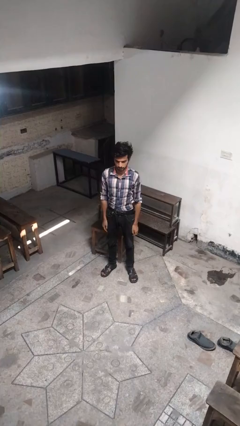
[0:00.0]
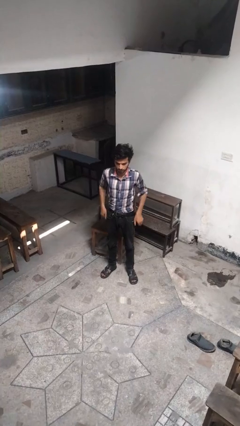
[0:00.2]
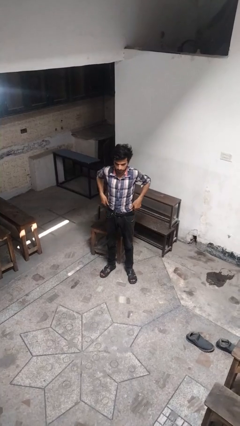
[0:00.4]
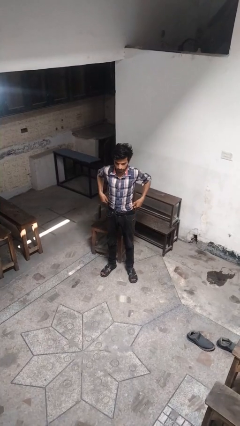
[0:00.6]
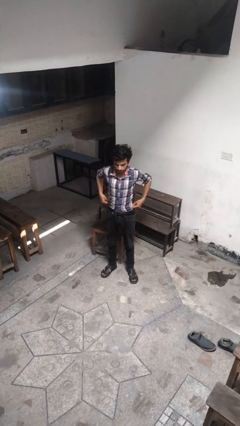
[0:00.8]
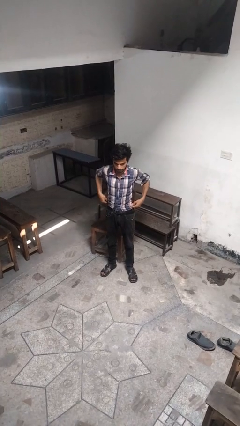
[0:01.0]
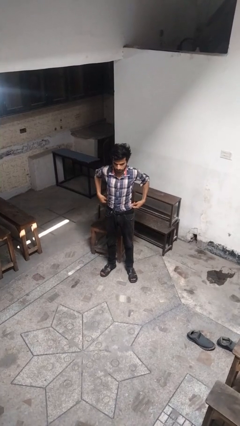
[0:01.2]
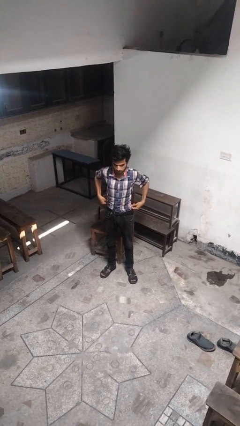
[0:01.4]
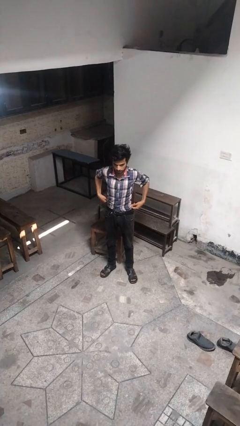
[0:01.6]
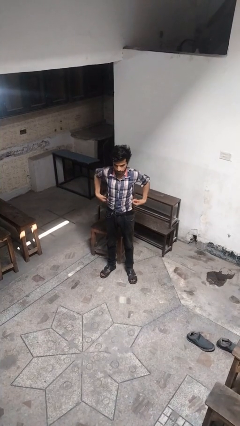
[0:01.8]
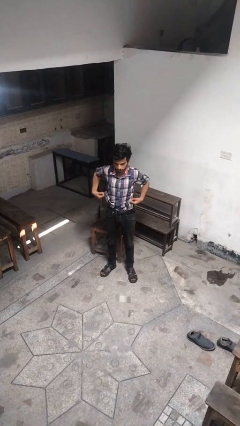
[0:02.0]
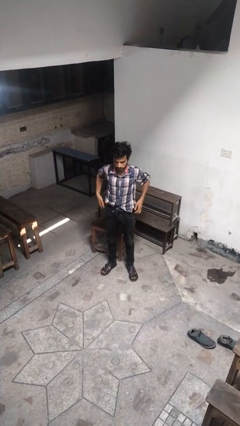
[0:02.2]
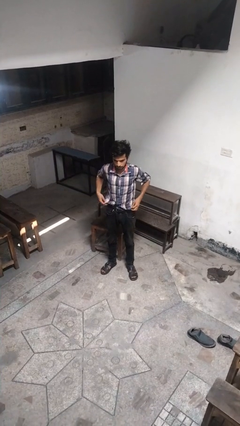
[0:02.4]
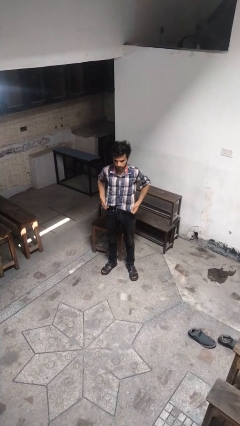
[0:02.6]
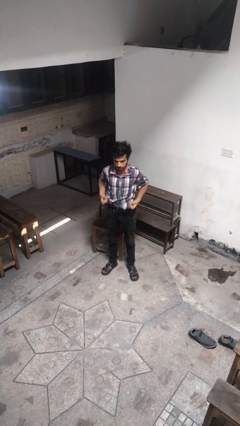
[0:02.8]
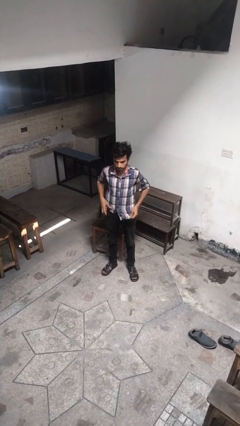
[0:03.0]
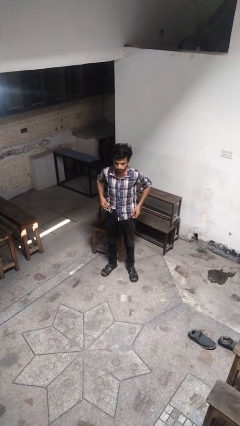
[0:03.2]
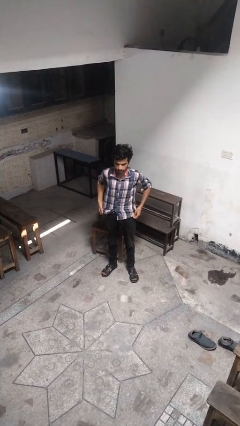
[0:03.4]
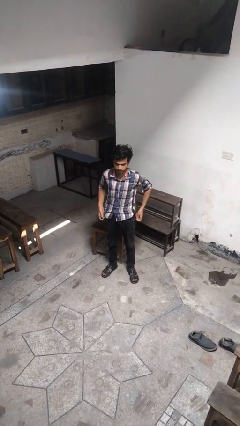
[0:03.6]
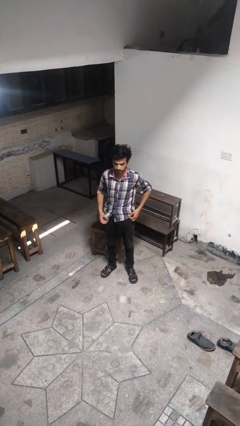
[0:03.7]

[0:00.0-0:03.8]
person untucks shirt

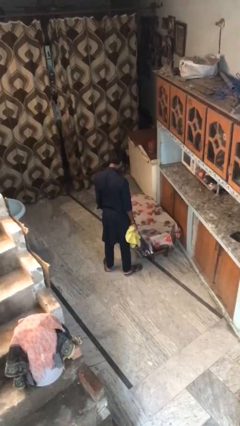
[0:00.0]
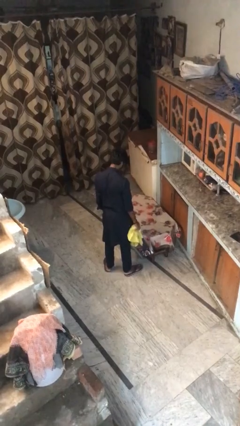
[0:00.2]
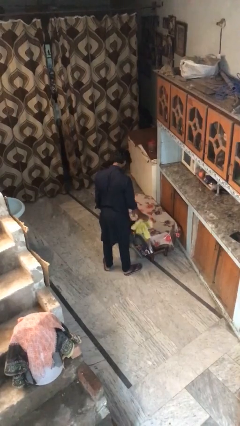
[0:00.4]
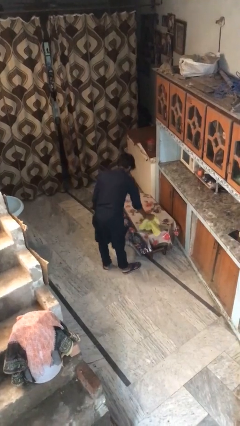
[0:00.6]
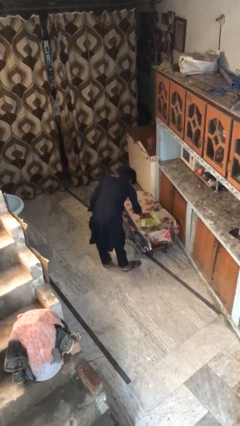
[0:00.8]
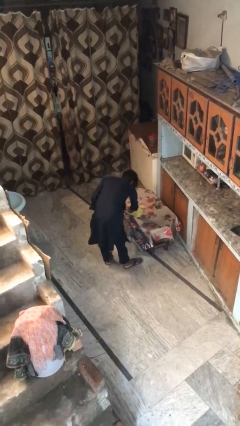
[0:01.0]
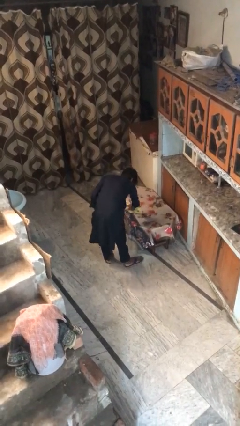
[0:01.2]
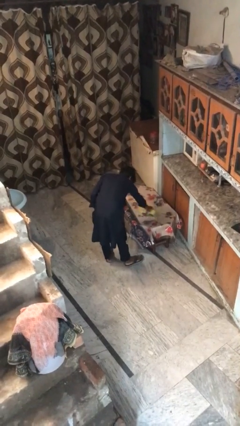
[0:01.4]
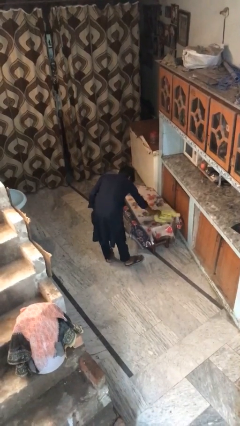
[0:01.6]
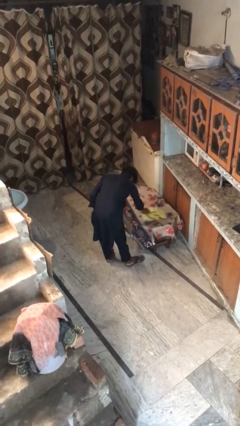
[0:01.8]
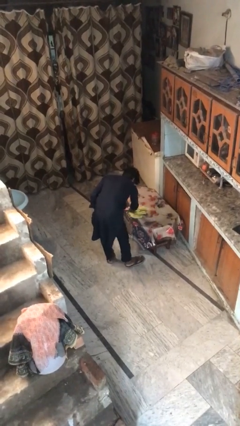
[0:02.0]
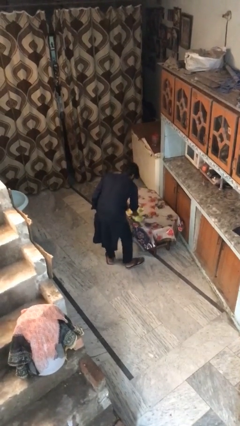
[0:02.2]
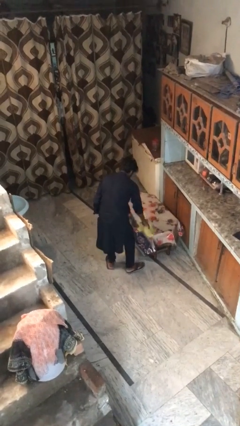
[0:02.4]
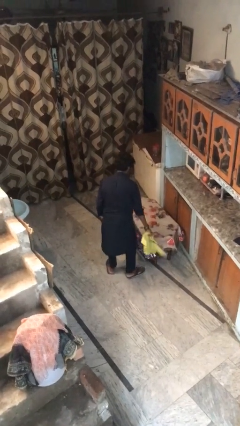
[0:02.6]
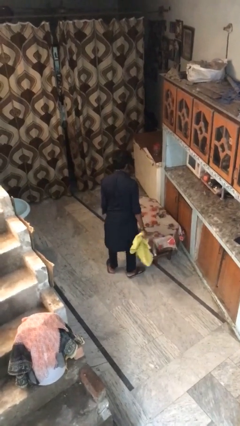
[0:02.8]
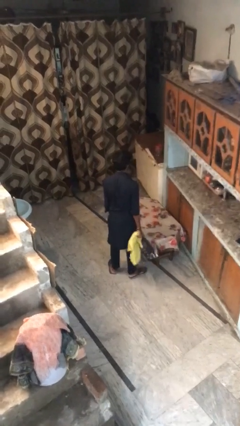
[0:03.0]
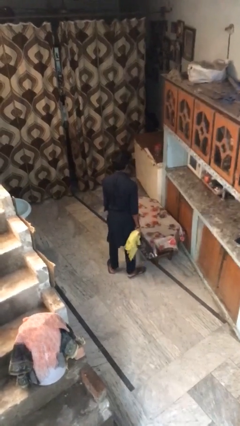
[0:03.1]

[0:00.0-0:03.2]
person cleans table with rag

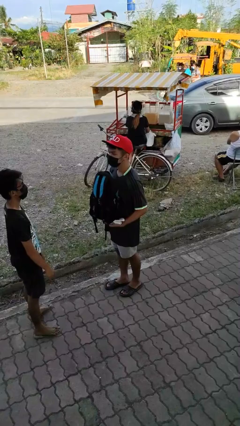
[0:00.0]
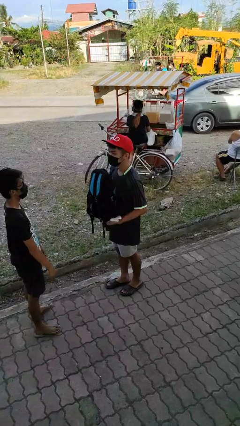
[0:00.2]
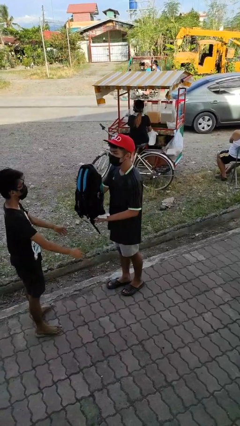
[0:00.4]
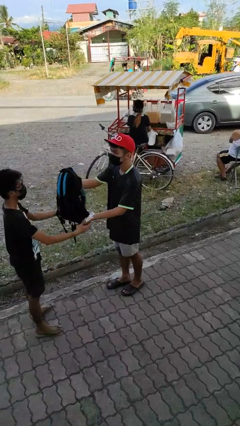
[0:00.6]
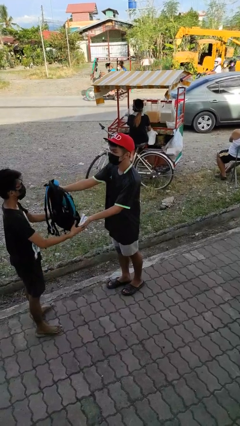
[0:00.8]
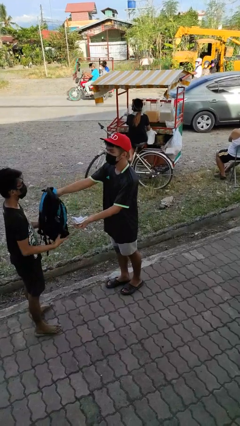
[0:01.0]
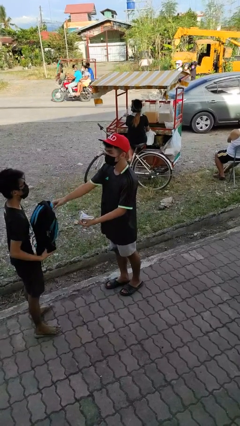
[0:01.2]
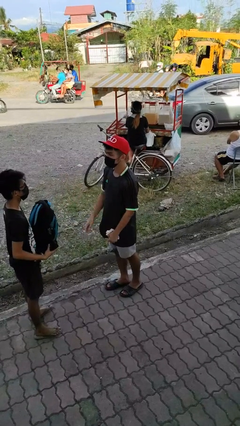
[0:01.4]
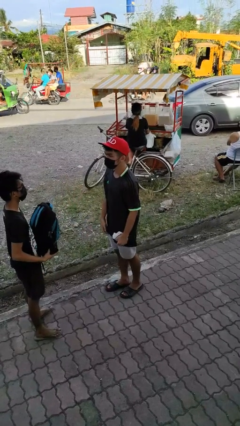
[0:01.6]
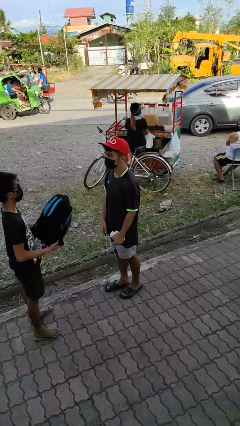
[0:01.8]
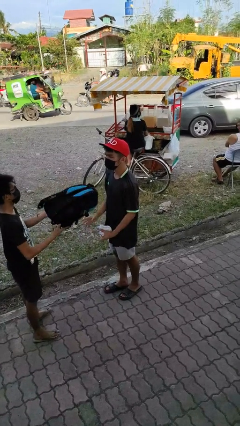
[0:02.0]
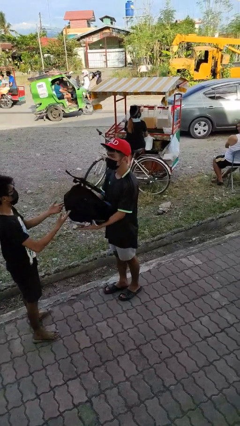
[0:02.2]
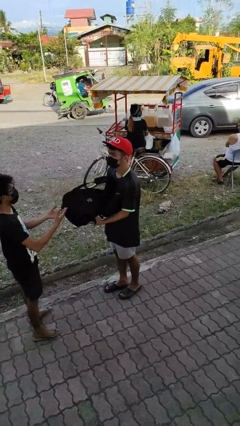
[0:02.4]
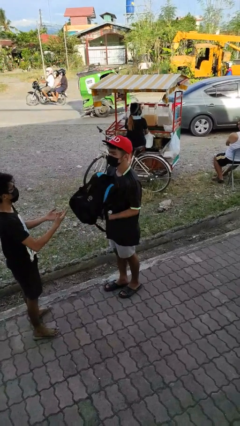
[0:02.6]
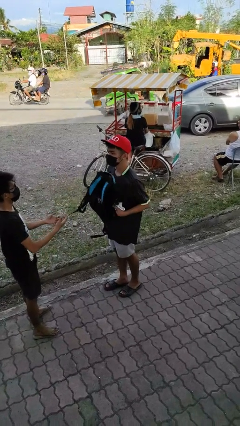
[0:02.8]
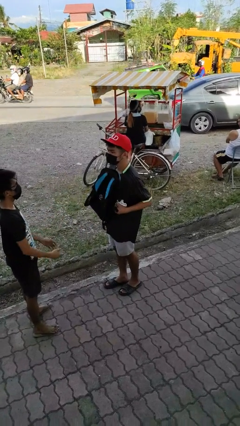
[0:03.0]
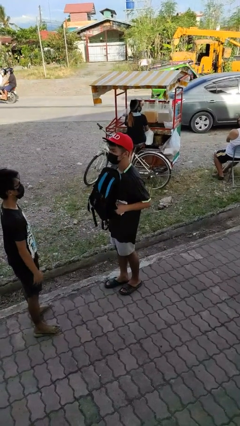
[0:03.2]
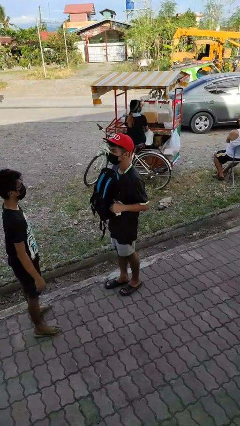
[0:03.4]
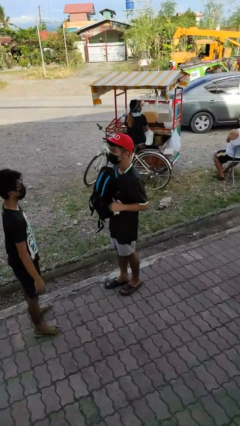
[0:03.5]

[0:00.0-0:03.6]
person transfers object to person

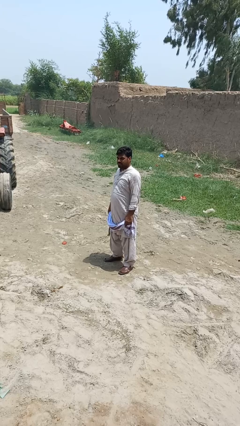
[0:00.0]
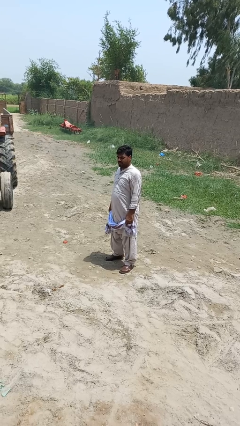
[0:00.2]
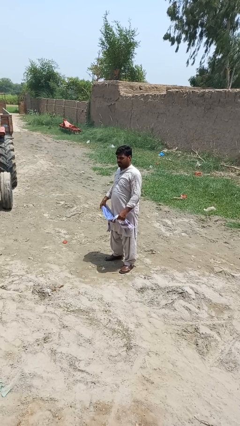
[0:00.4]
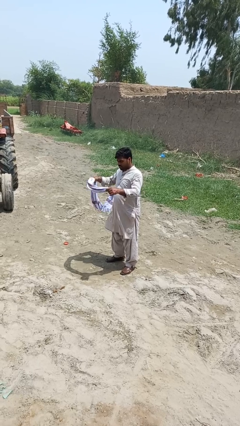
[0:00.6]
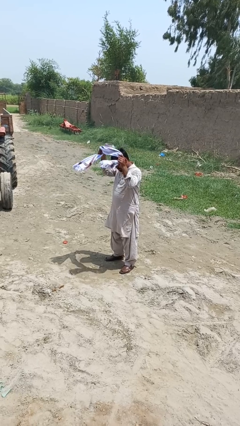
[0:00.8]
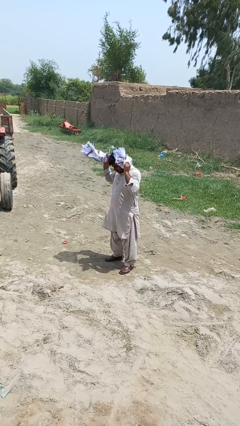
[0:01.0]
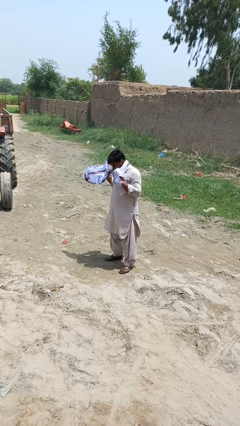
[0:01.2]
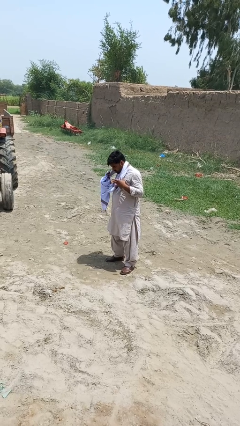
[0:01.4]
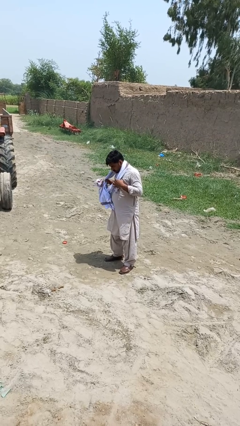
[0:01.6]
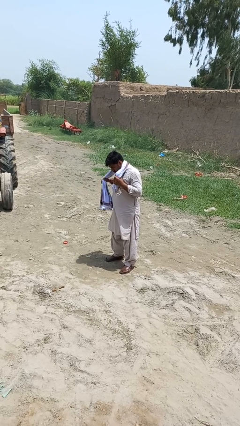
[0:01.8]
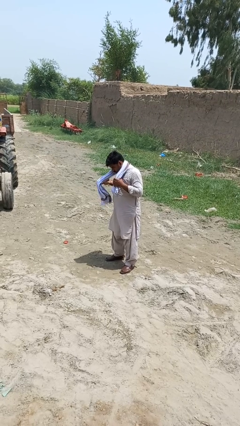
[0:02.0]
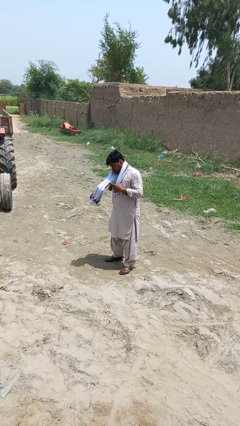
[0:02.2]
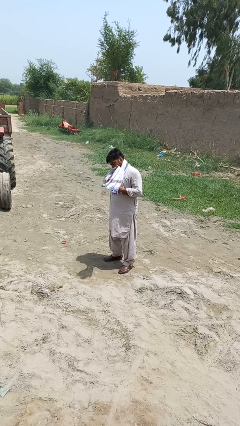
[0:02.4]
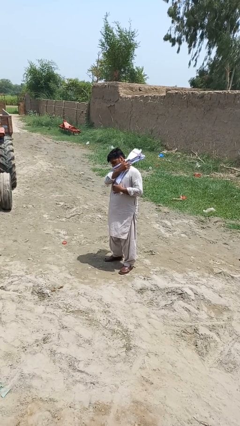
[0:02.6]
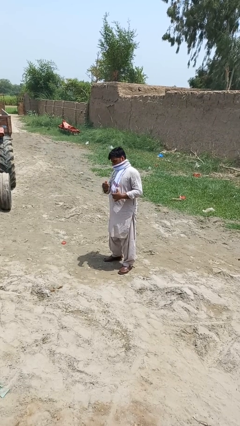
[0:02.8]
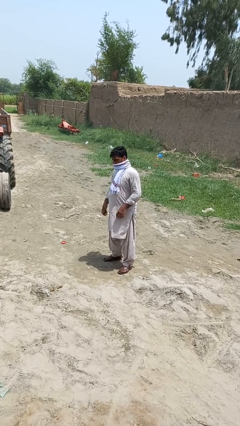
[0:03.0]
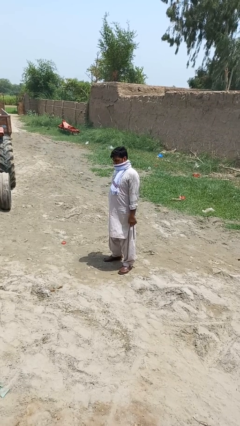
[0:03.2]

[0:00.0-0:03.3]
person puts on scarf

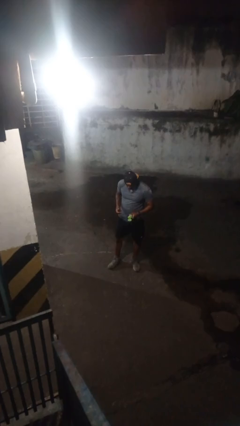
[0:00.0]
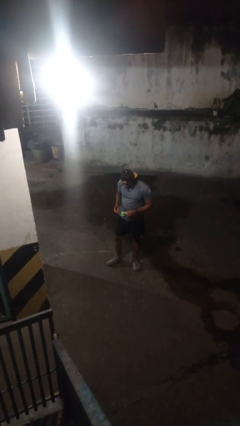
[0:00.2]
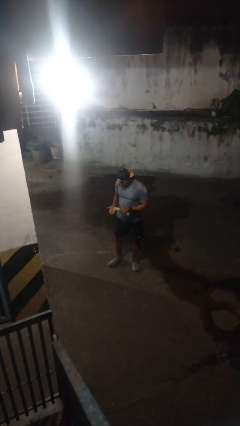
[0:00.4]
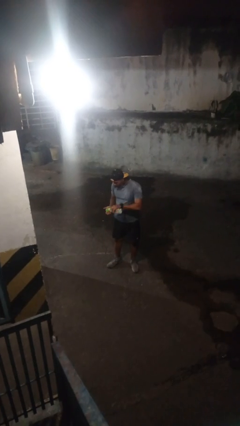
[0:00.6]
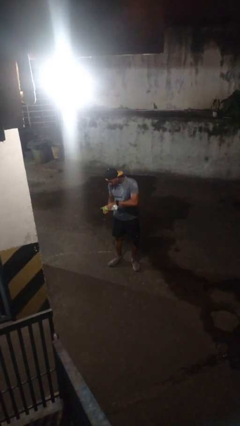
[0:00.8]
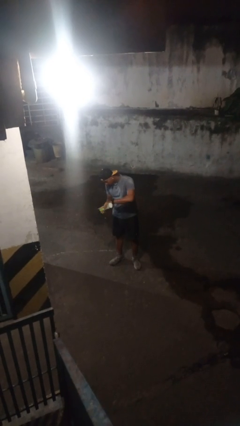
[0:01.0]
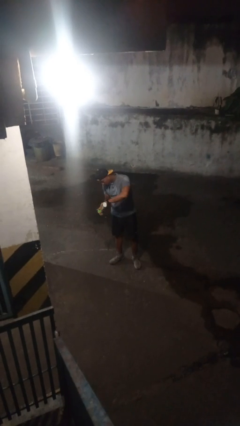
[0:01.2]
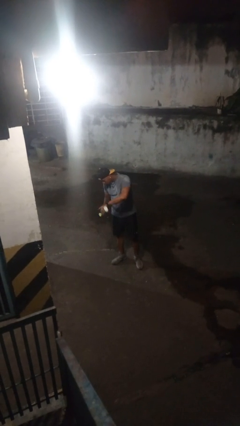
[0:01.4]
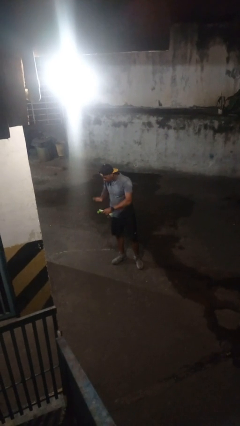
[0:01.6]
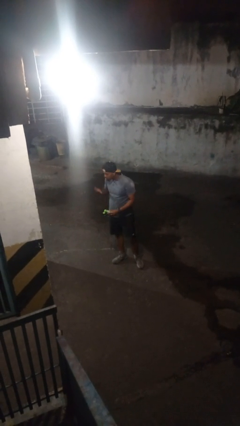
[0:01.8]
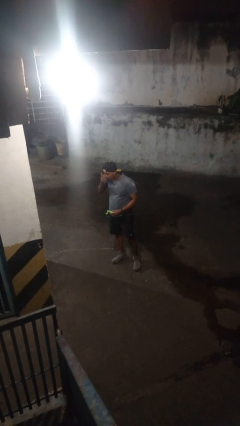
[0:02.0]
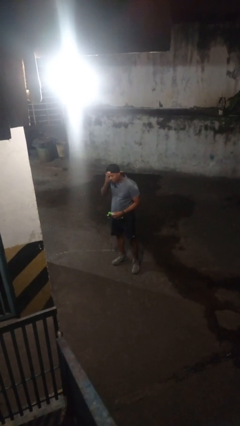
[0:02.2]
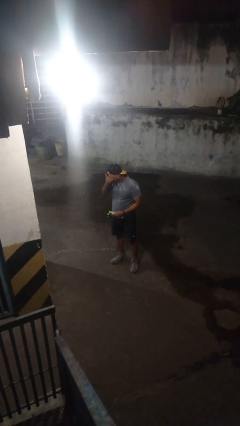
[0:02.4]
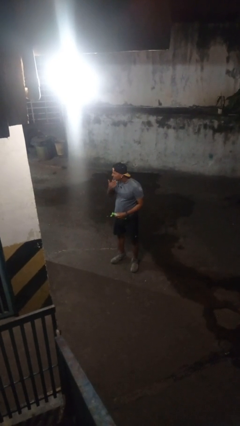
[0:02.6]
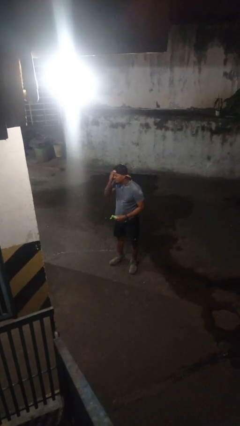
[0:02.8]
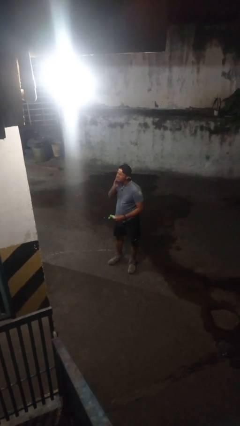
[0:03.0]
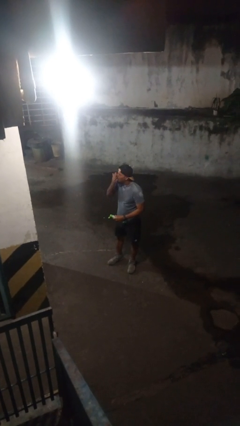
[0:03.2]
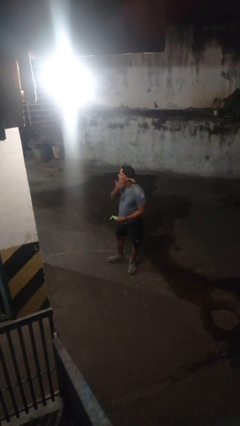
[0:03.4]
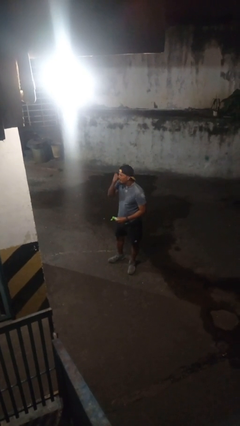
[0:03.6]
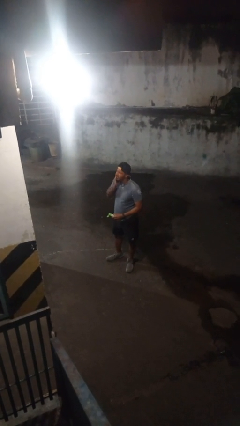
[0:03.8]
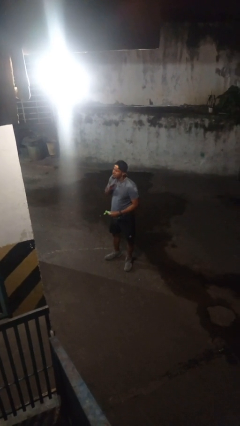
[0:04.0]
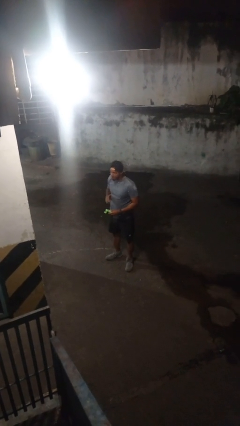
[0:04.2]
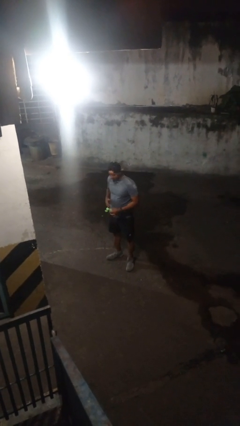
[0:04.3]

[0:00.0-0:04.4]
person applies facial moisturizer
